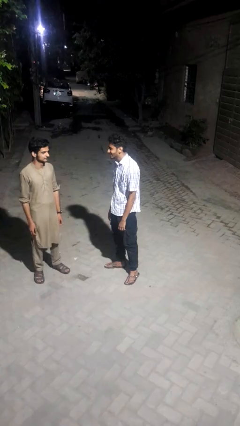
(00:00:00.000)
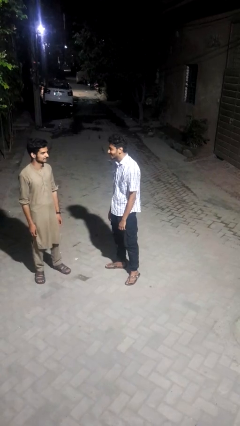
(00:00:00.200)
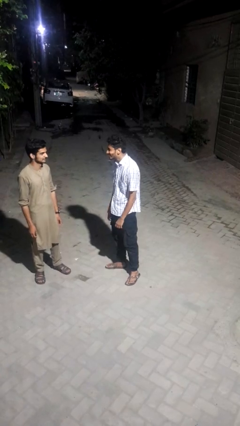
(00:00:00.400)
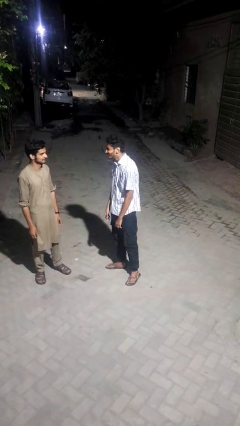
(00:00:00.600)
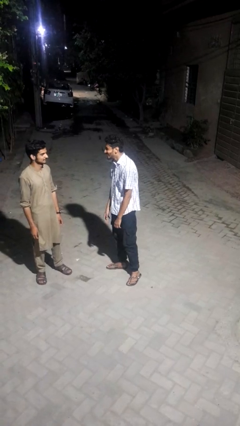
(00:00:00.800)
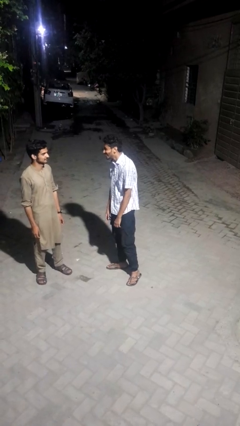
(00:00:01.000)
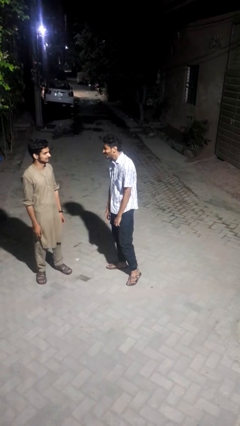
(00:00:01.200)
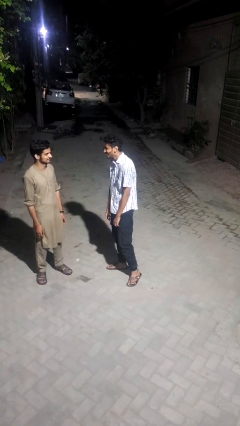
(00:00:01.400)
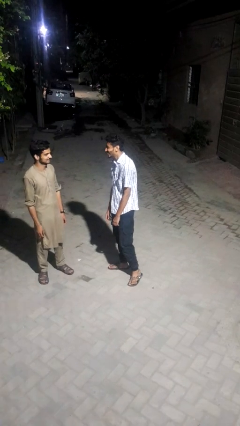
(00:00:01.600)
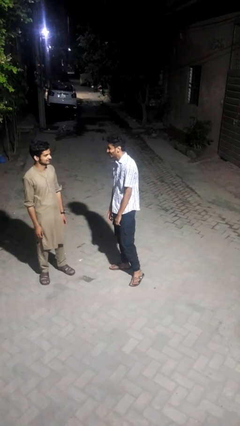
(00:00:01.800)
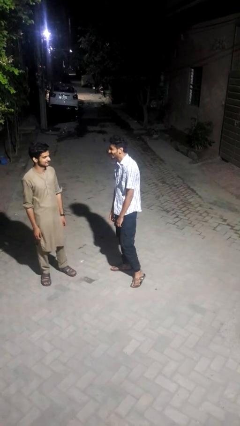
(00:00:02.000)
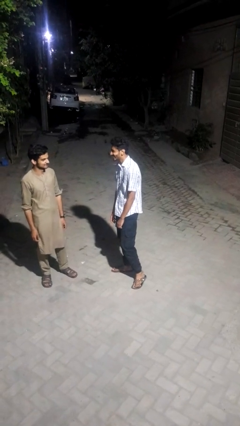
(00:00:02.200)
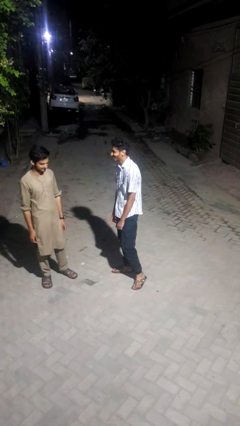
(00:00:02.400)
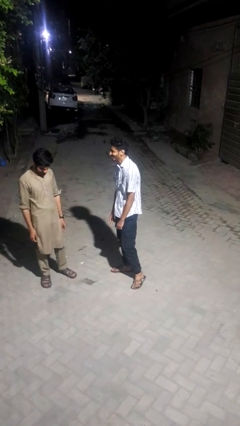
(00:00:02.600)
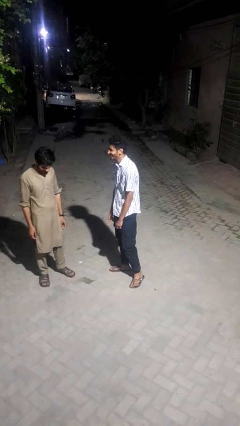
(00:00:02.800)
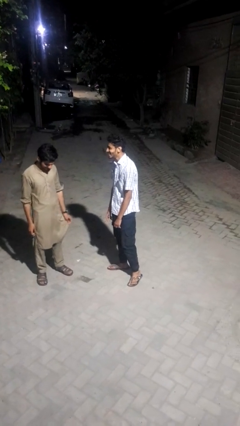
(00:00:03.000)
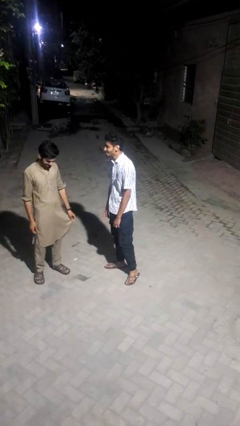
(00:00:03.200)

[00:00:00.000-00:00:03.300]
person laughs with person

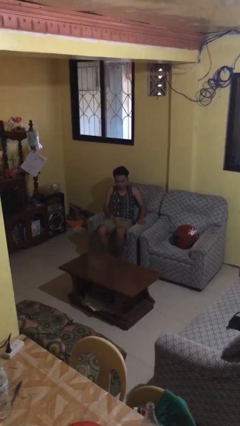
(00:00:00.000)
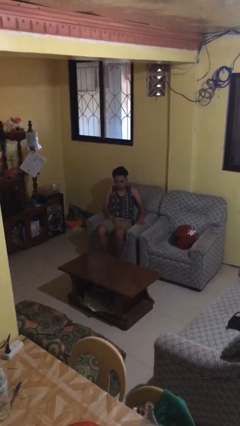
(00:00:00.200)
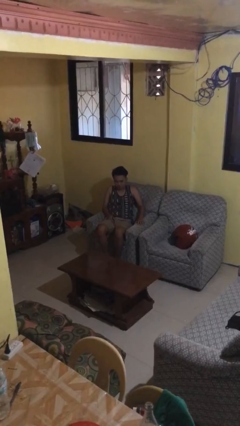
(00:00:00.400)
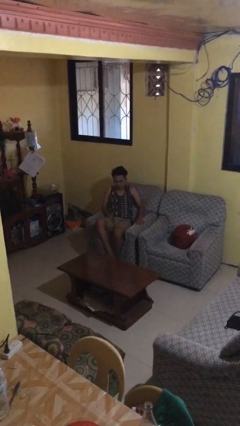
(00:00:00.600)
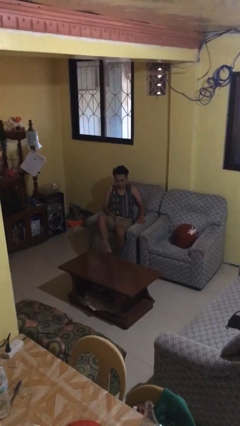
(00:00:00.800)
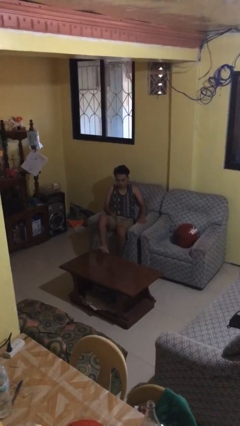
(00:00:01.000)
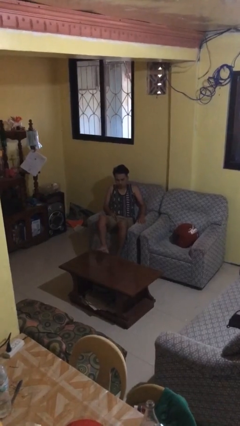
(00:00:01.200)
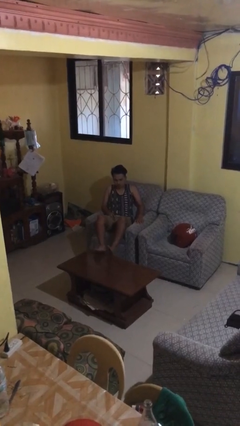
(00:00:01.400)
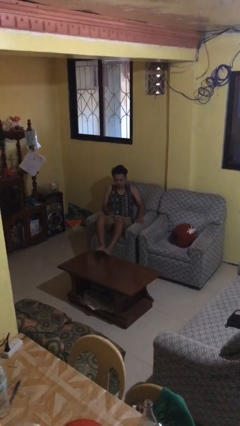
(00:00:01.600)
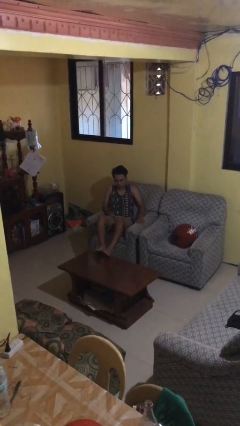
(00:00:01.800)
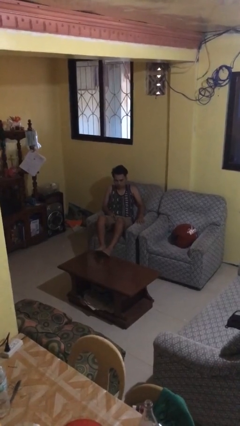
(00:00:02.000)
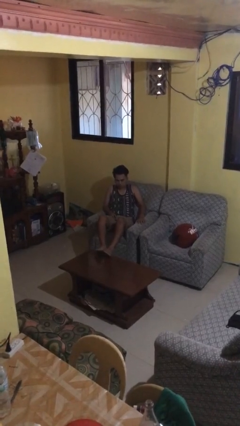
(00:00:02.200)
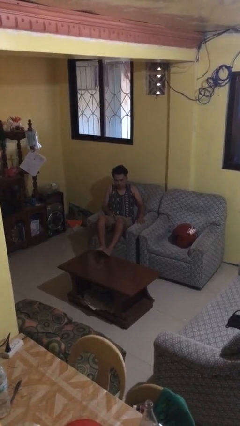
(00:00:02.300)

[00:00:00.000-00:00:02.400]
person puts feet up

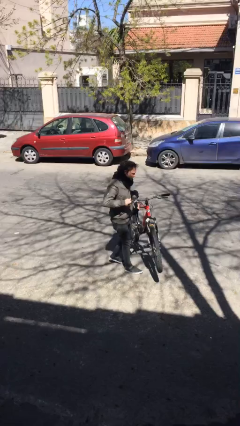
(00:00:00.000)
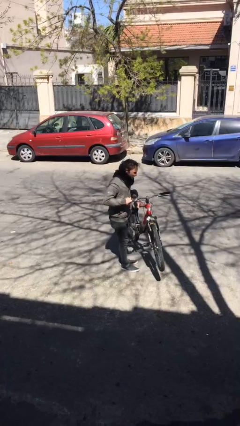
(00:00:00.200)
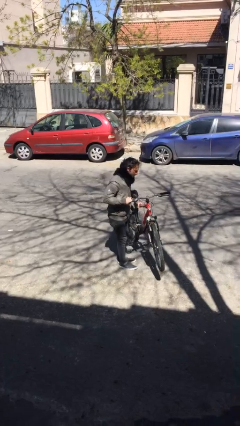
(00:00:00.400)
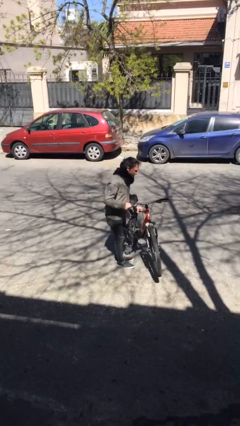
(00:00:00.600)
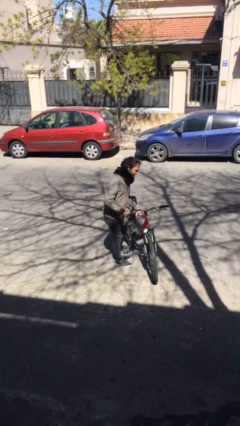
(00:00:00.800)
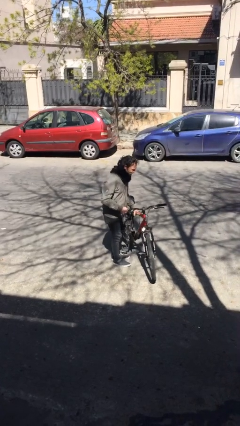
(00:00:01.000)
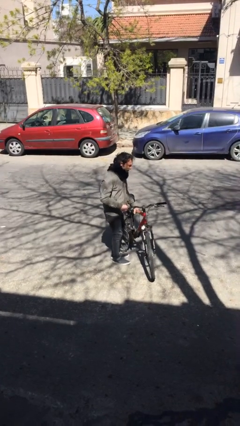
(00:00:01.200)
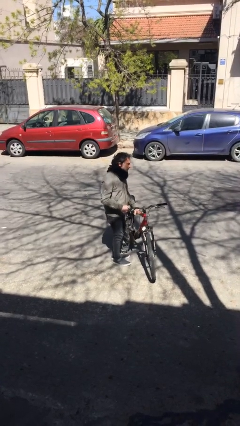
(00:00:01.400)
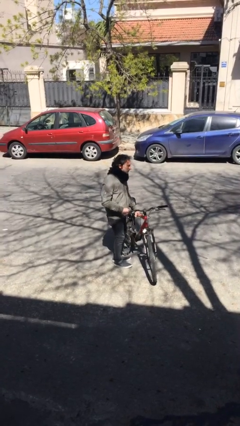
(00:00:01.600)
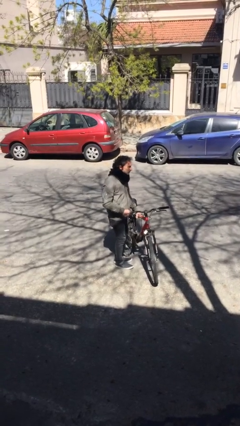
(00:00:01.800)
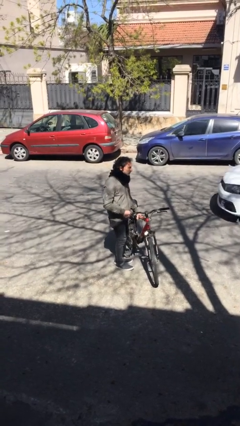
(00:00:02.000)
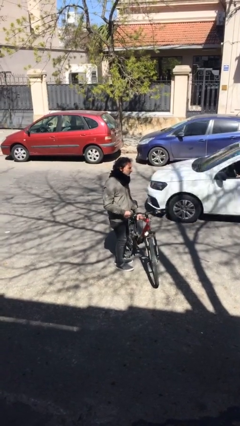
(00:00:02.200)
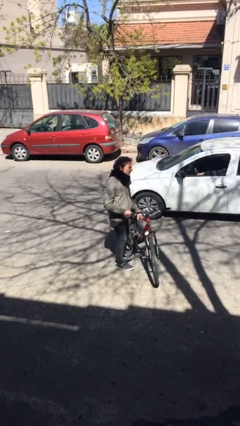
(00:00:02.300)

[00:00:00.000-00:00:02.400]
person puts down object on floor

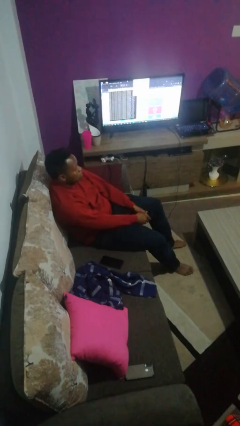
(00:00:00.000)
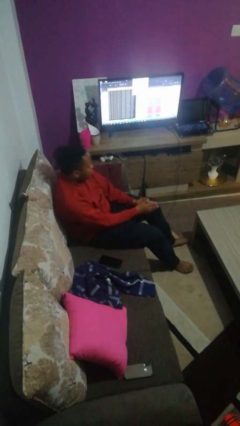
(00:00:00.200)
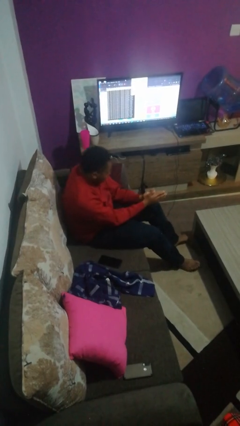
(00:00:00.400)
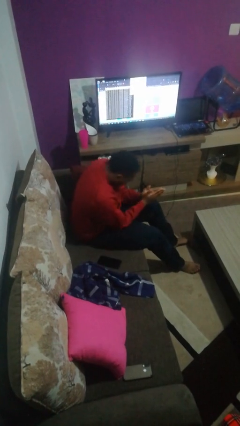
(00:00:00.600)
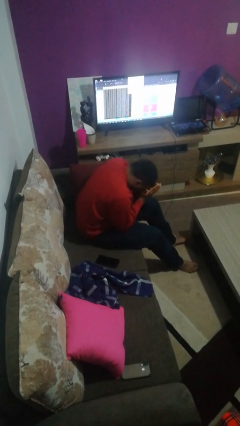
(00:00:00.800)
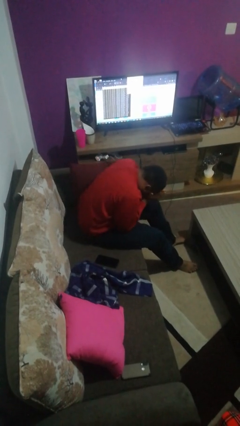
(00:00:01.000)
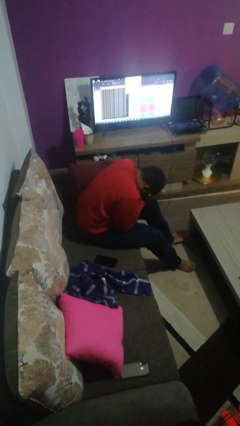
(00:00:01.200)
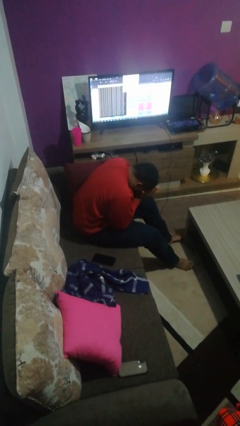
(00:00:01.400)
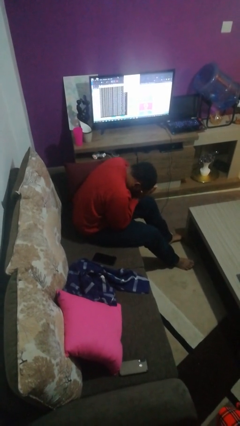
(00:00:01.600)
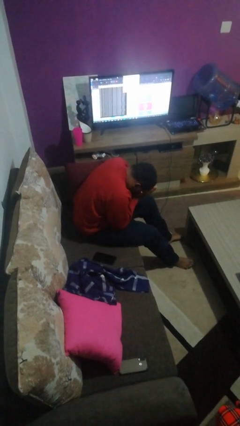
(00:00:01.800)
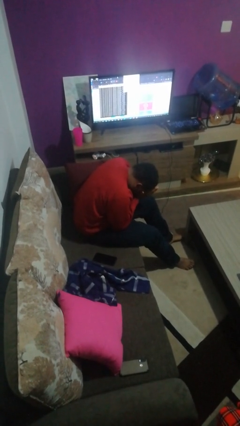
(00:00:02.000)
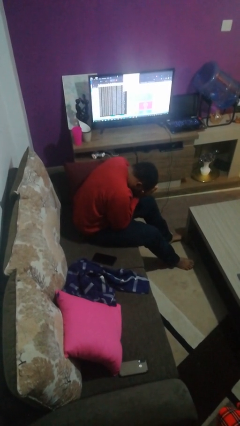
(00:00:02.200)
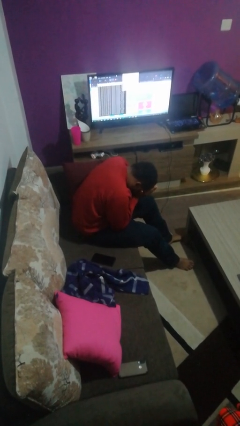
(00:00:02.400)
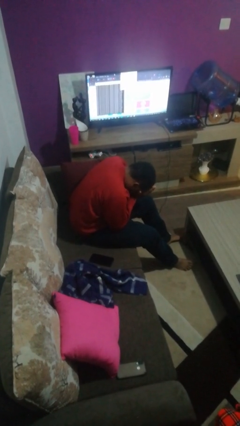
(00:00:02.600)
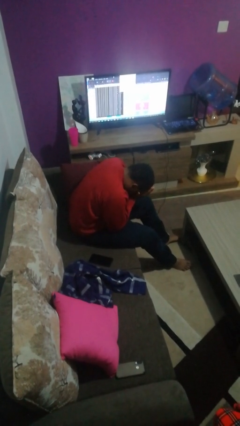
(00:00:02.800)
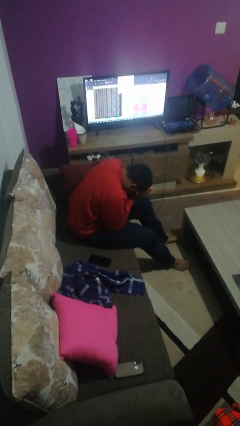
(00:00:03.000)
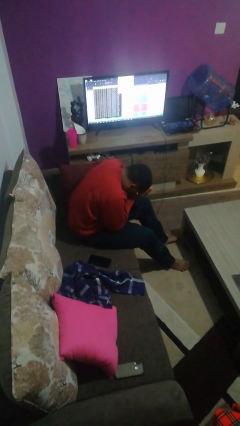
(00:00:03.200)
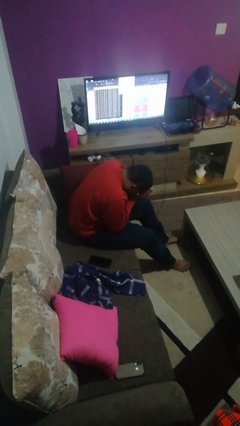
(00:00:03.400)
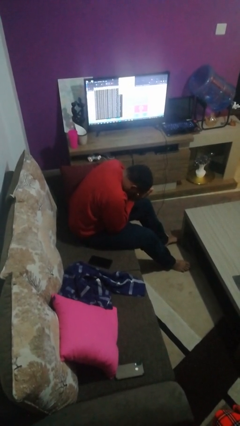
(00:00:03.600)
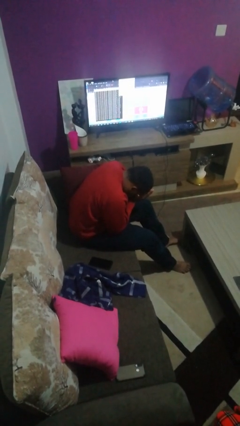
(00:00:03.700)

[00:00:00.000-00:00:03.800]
person prays

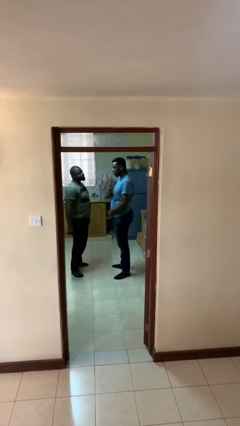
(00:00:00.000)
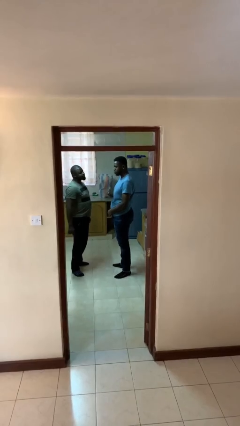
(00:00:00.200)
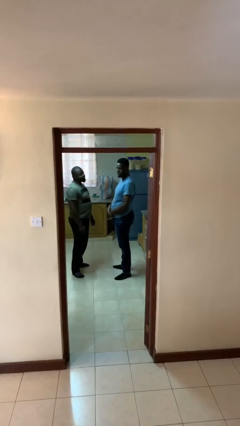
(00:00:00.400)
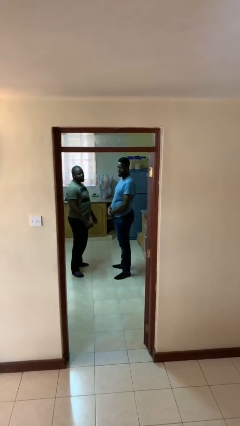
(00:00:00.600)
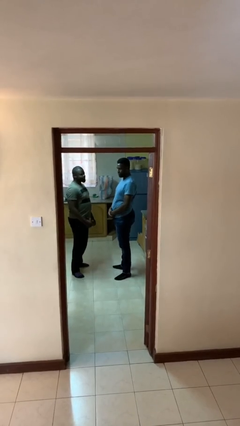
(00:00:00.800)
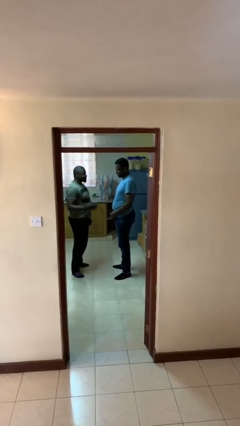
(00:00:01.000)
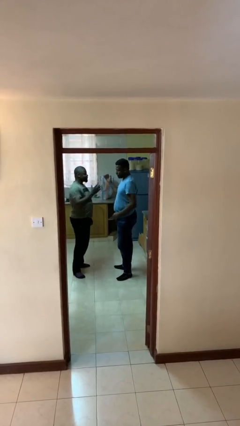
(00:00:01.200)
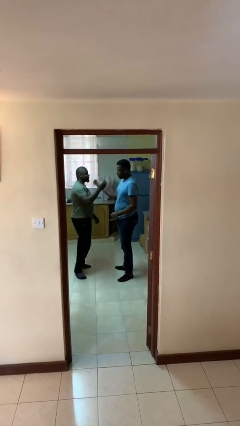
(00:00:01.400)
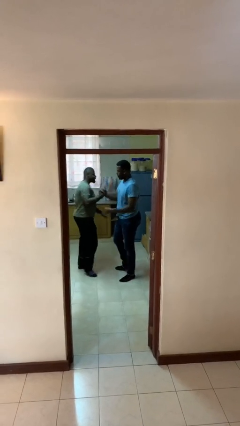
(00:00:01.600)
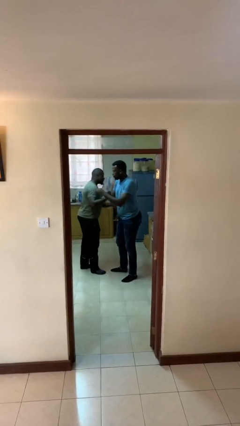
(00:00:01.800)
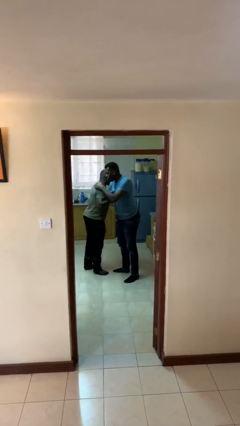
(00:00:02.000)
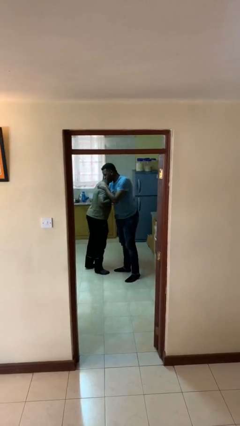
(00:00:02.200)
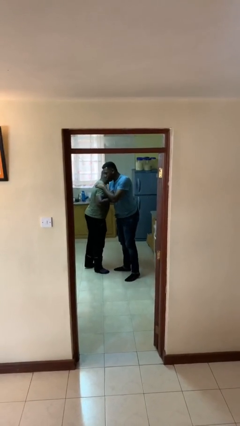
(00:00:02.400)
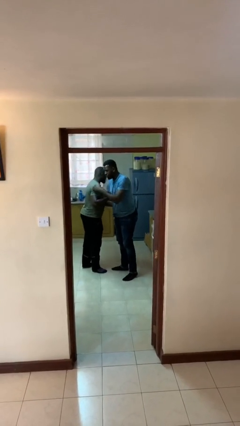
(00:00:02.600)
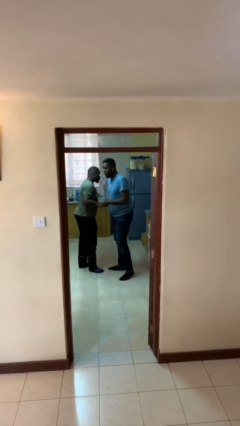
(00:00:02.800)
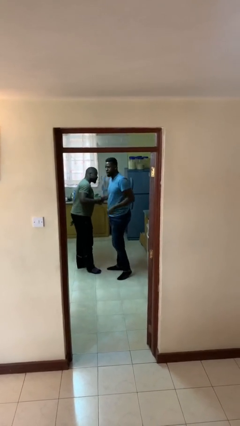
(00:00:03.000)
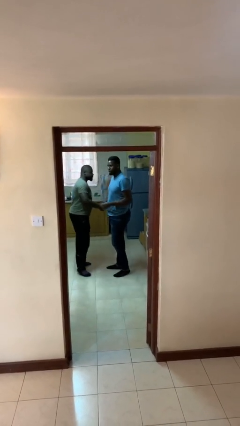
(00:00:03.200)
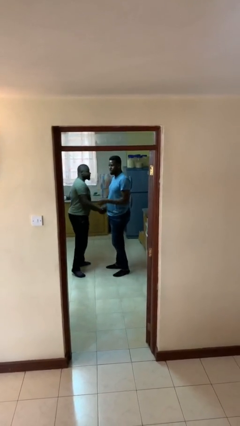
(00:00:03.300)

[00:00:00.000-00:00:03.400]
person embraces person

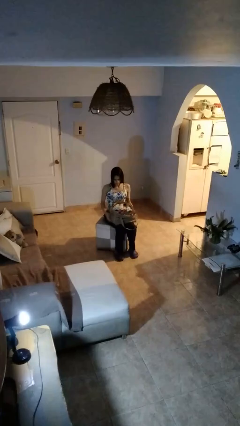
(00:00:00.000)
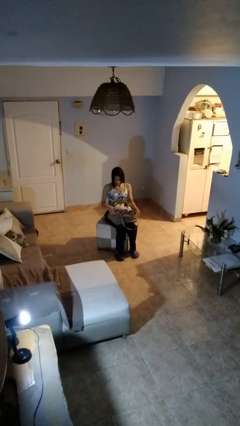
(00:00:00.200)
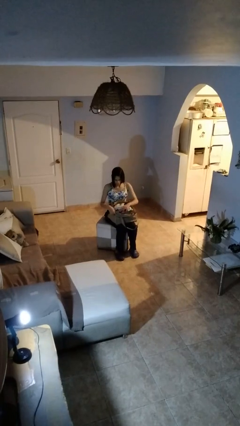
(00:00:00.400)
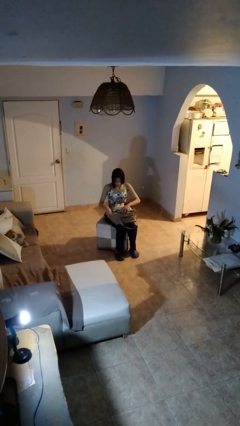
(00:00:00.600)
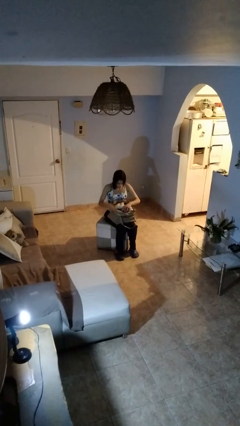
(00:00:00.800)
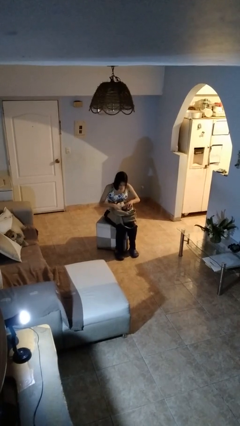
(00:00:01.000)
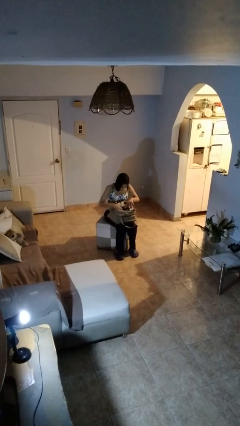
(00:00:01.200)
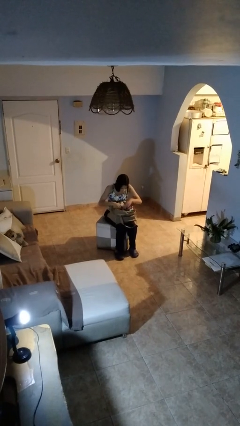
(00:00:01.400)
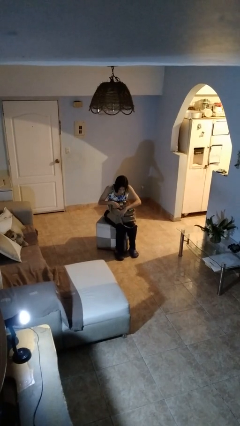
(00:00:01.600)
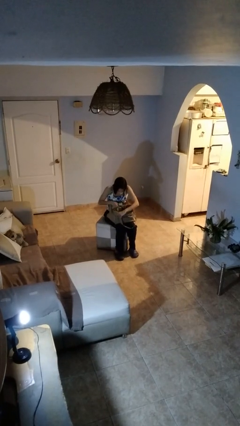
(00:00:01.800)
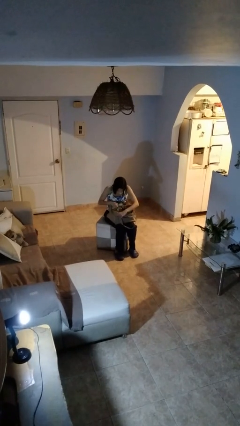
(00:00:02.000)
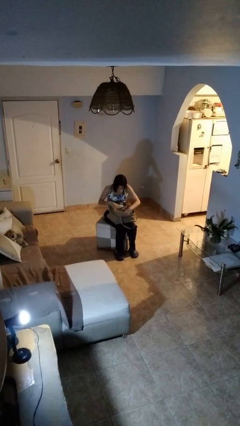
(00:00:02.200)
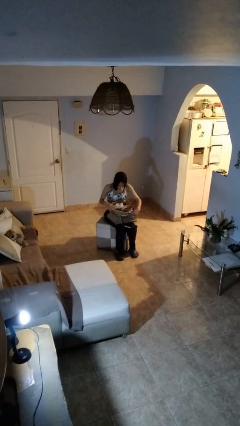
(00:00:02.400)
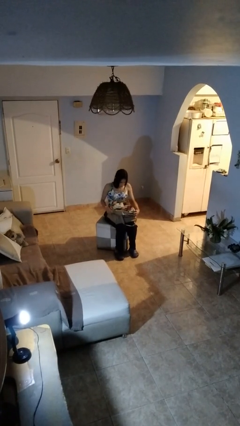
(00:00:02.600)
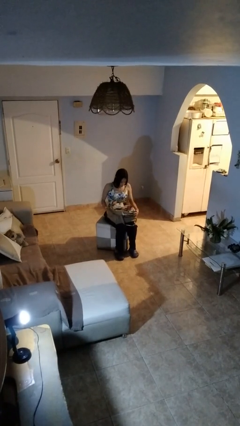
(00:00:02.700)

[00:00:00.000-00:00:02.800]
person searches in bag
